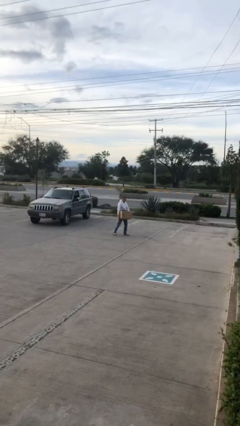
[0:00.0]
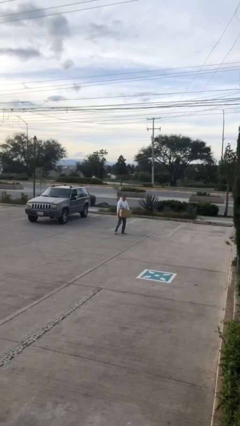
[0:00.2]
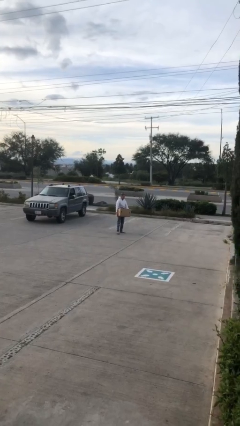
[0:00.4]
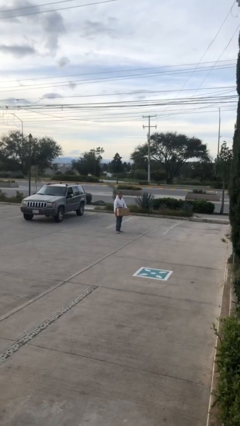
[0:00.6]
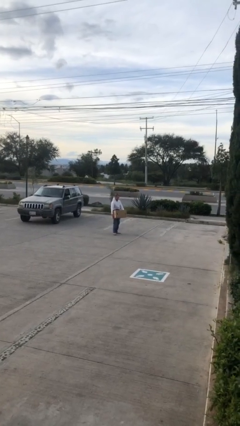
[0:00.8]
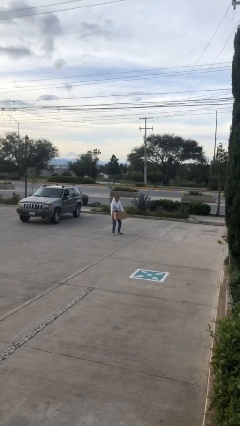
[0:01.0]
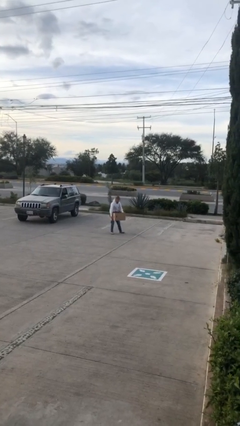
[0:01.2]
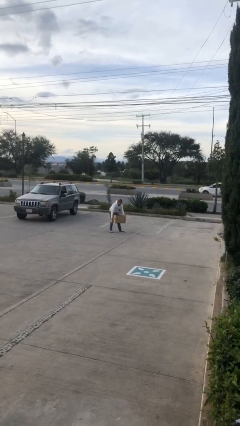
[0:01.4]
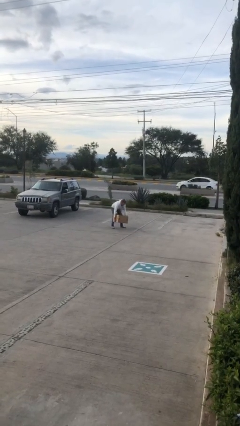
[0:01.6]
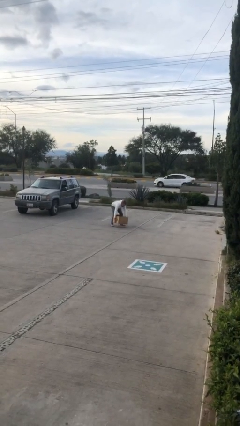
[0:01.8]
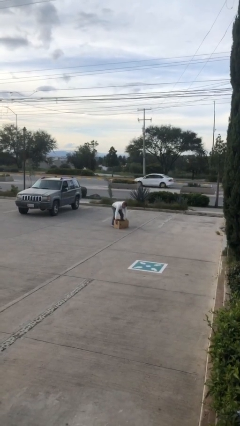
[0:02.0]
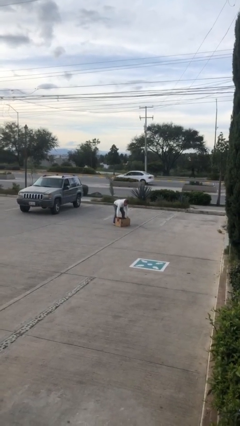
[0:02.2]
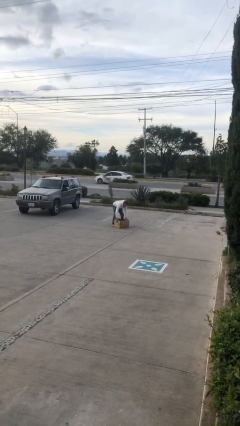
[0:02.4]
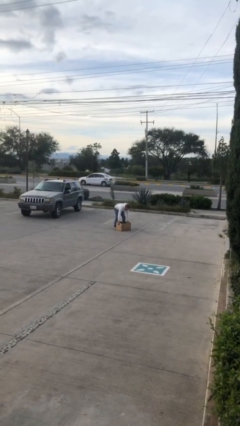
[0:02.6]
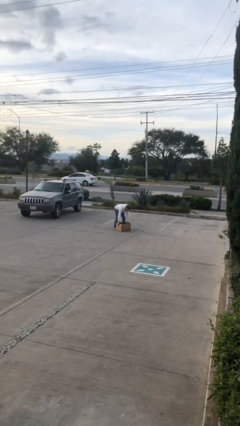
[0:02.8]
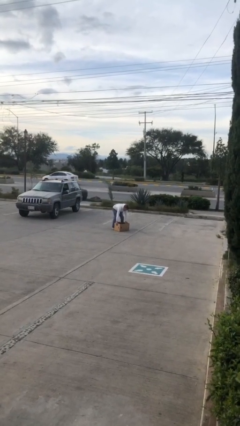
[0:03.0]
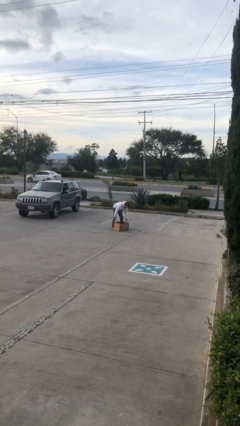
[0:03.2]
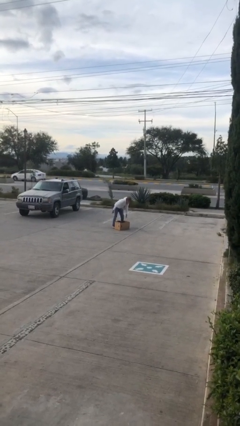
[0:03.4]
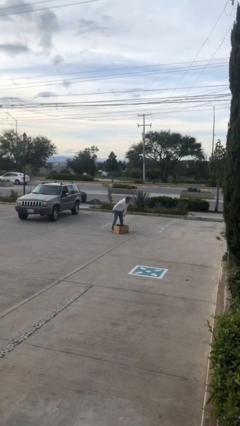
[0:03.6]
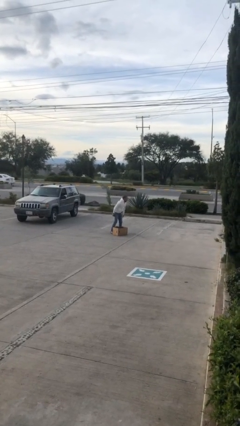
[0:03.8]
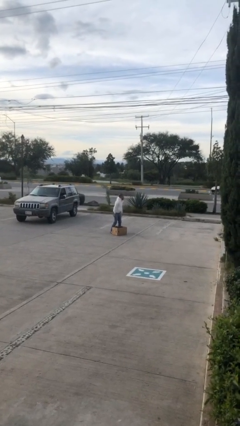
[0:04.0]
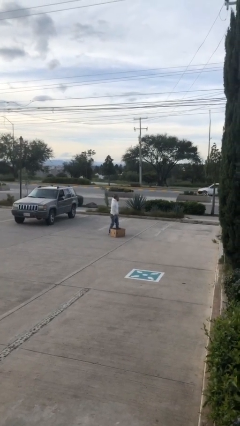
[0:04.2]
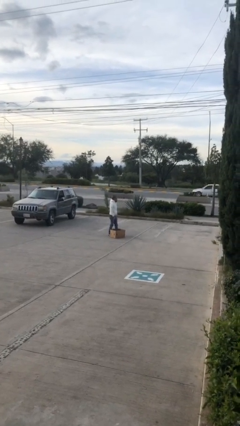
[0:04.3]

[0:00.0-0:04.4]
person puts down object on floor

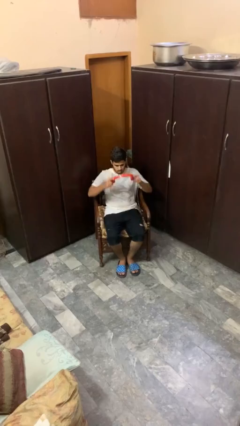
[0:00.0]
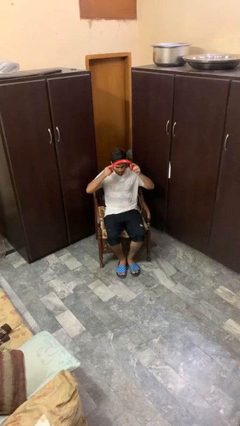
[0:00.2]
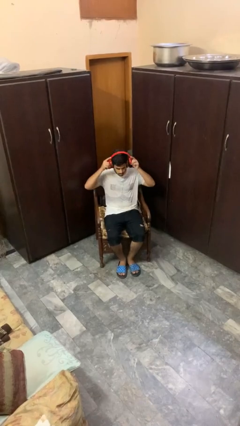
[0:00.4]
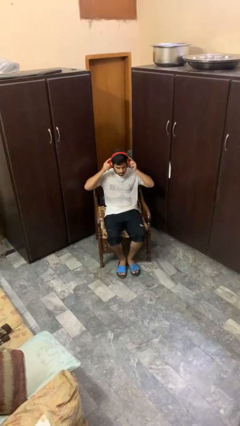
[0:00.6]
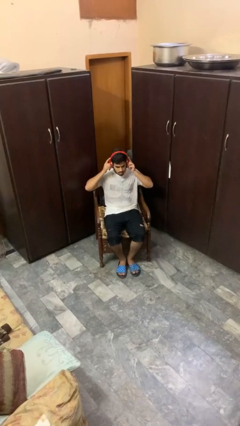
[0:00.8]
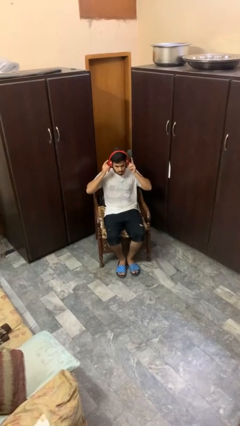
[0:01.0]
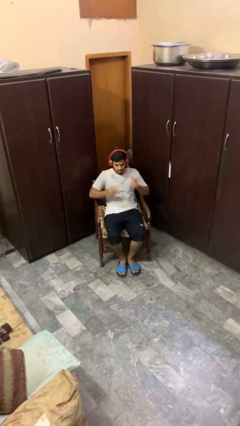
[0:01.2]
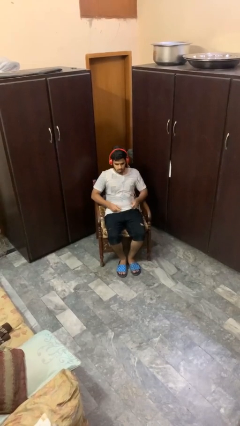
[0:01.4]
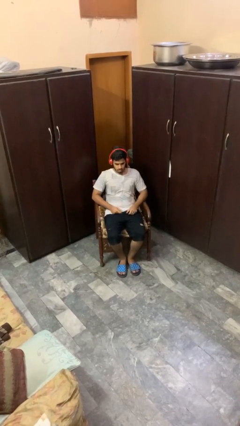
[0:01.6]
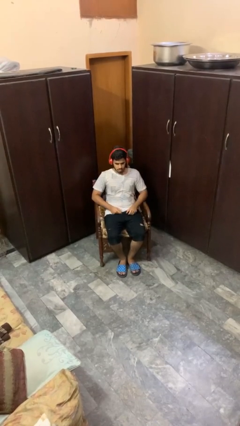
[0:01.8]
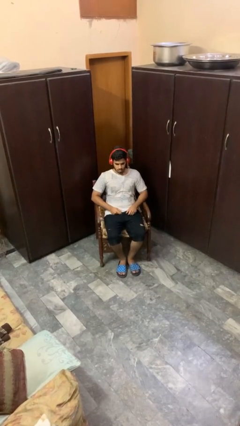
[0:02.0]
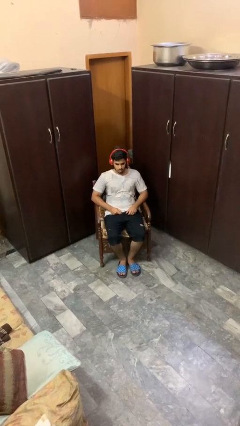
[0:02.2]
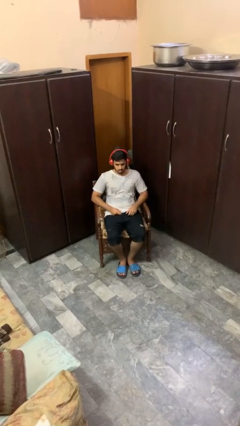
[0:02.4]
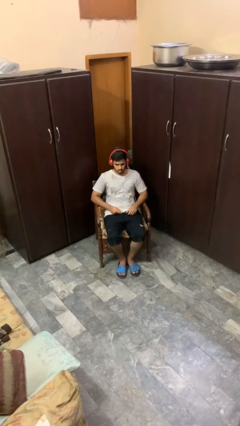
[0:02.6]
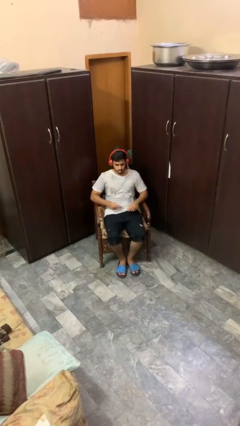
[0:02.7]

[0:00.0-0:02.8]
person puts on headphones

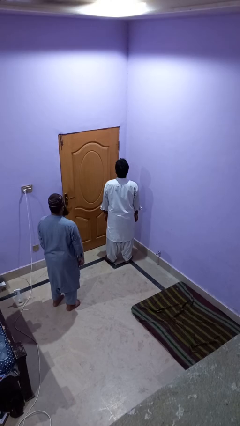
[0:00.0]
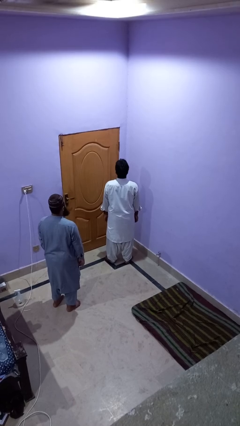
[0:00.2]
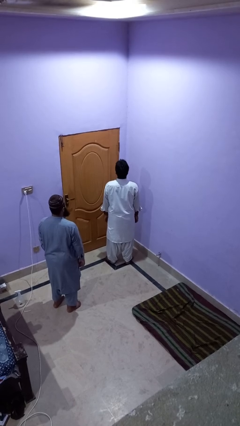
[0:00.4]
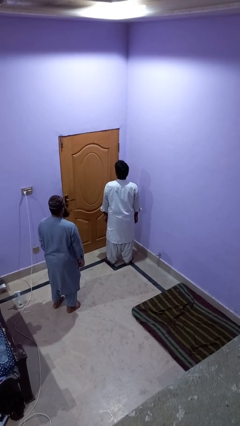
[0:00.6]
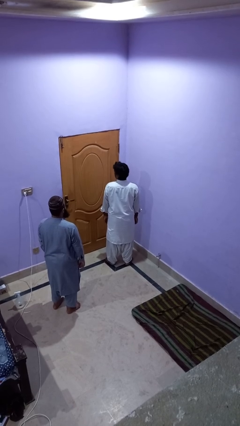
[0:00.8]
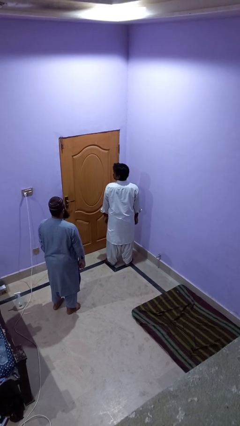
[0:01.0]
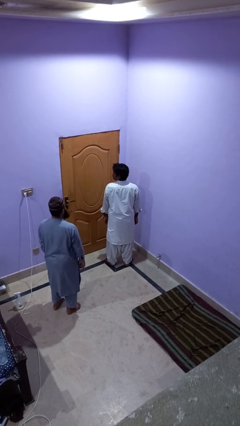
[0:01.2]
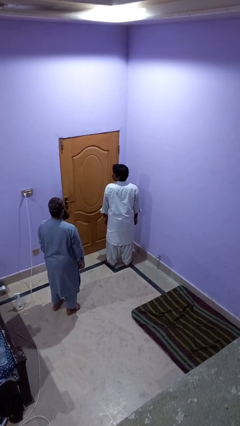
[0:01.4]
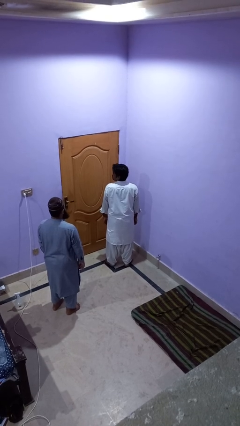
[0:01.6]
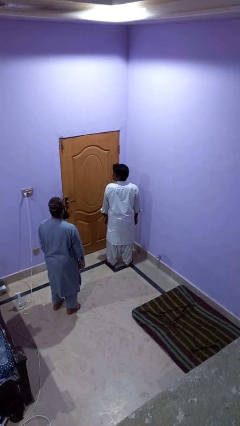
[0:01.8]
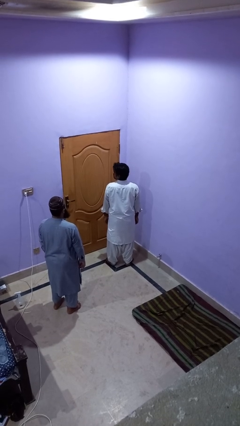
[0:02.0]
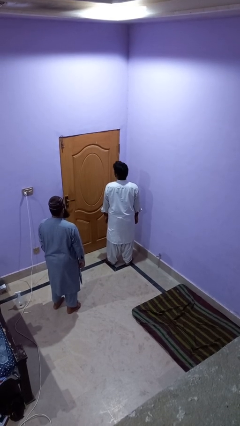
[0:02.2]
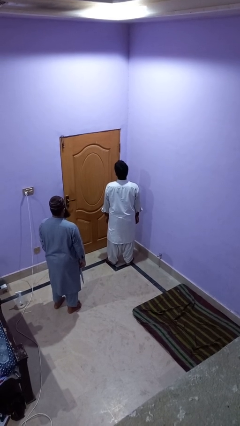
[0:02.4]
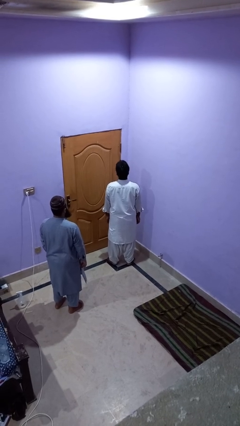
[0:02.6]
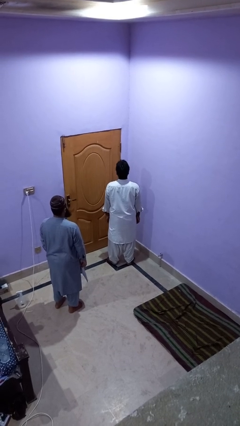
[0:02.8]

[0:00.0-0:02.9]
person looks over shoulder

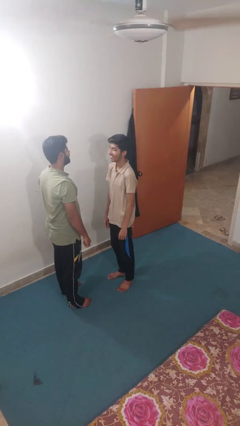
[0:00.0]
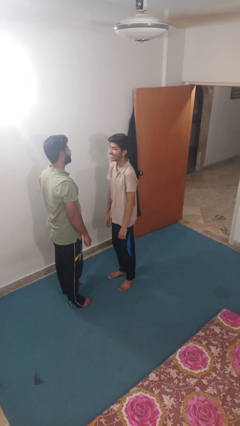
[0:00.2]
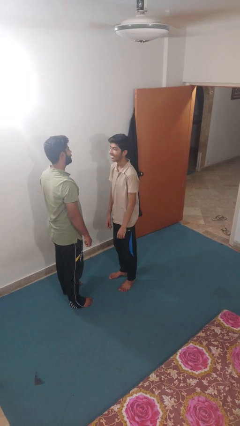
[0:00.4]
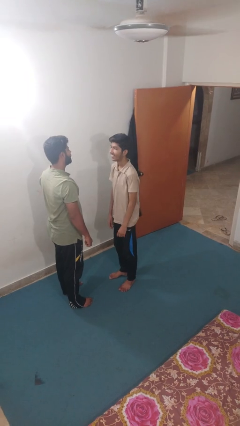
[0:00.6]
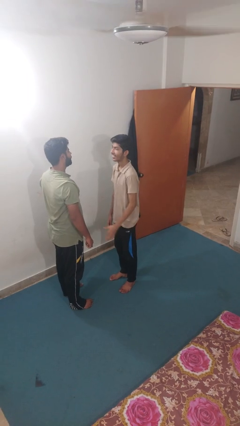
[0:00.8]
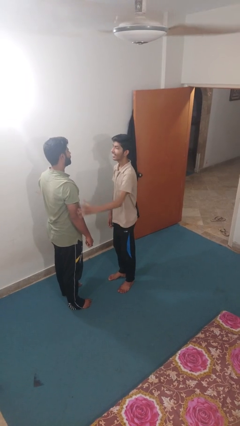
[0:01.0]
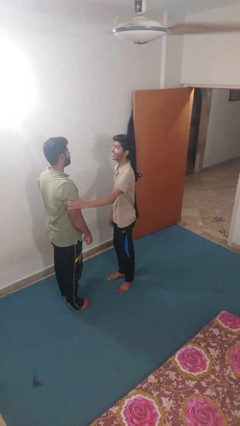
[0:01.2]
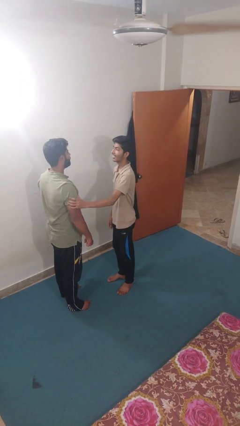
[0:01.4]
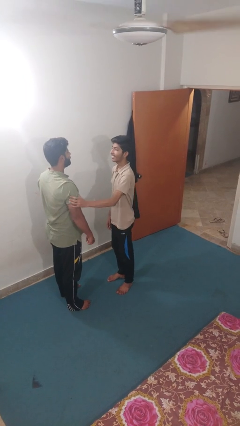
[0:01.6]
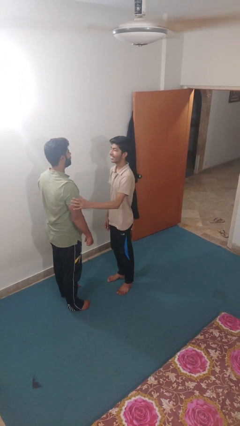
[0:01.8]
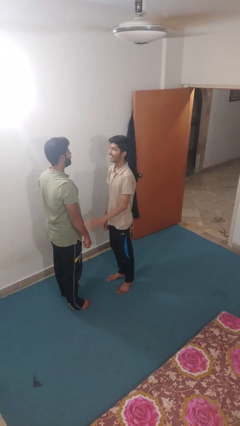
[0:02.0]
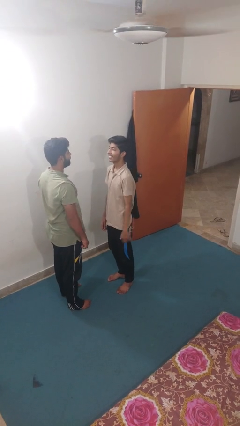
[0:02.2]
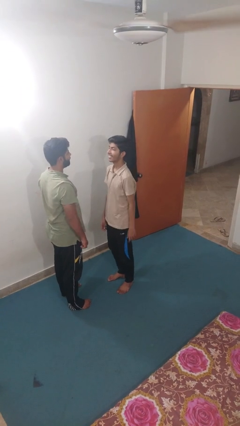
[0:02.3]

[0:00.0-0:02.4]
person grabs person by bicep

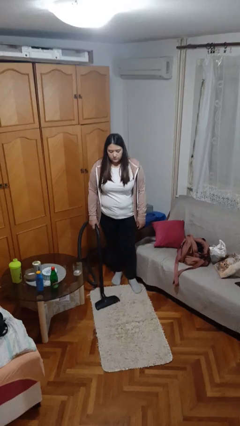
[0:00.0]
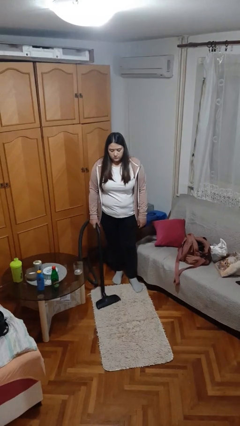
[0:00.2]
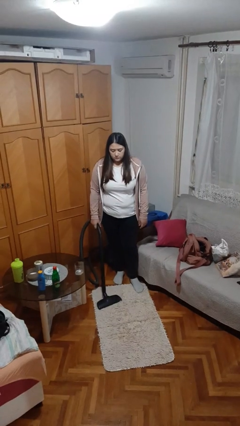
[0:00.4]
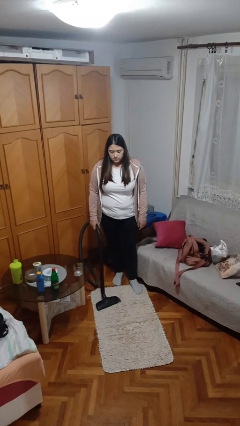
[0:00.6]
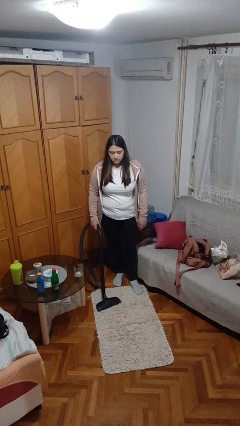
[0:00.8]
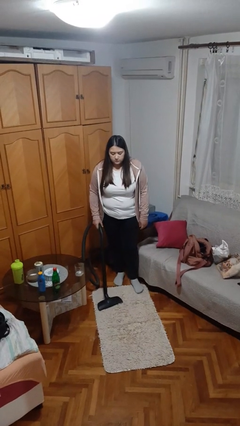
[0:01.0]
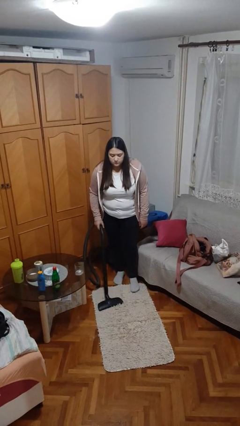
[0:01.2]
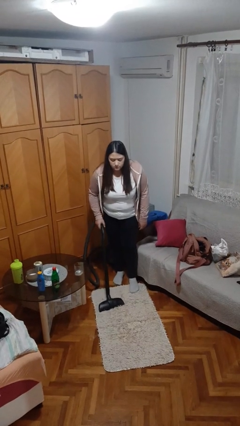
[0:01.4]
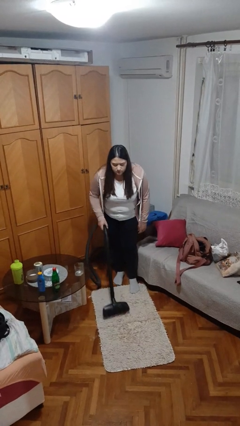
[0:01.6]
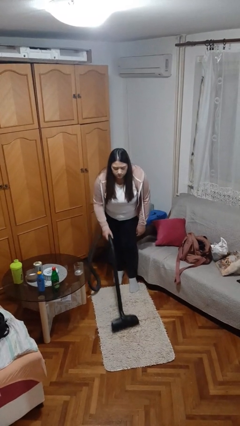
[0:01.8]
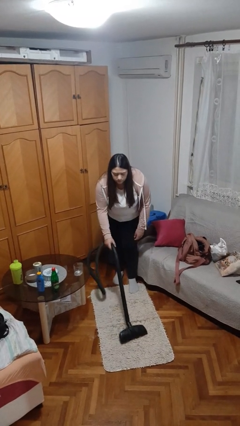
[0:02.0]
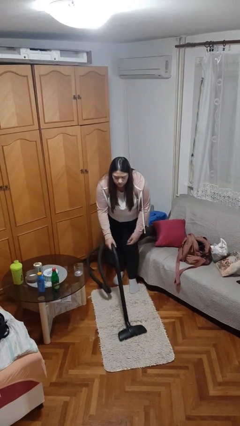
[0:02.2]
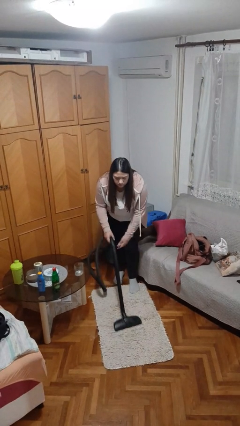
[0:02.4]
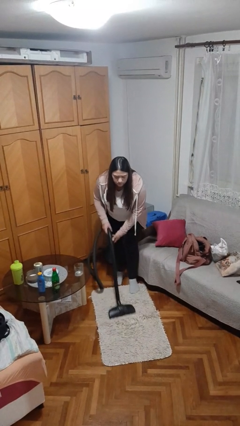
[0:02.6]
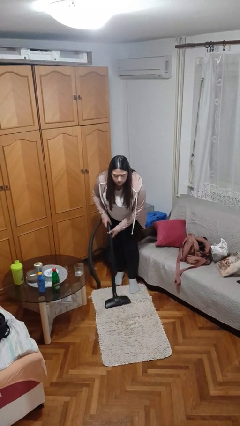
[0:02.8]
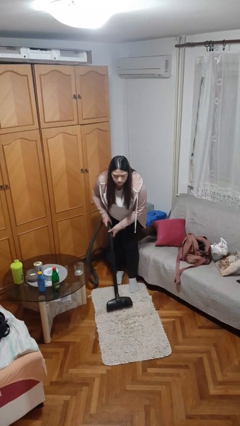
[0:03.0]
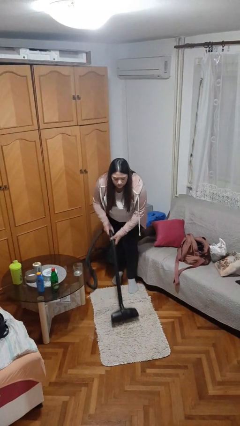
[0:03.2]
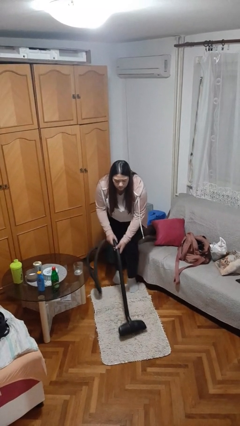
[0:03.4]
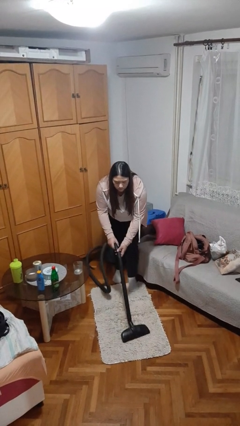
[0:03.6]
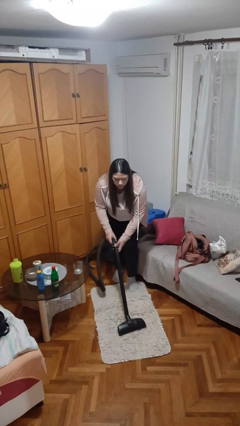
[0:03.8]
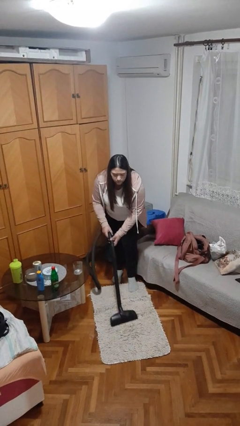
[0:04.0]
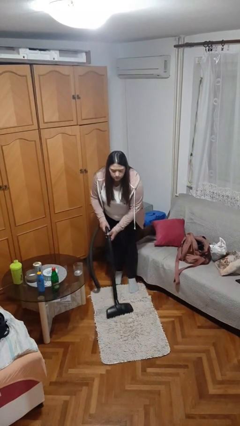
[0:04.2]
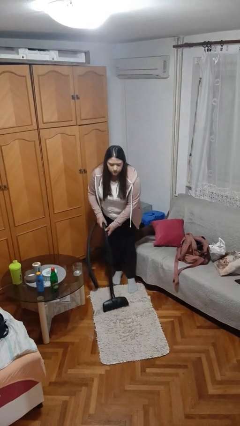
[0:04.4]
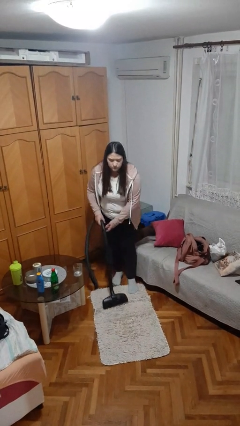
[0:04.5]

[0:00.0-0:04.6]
person vacuums carpet

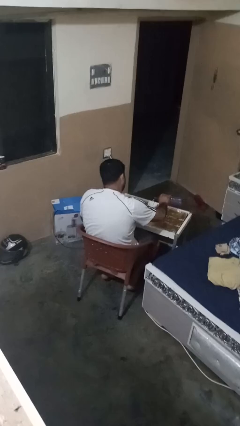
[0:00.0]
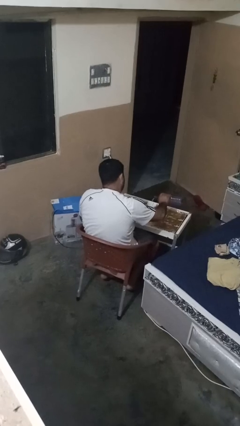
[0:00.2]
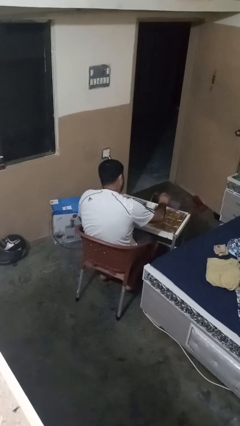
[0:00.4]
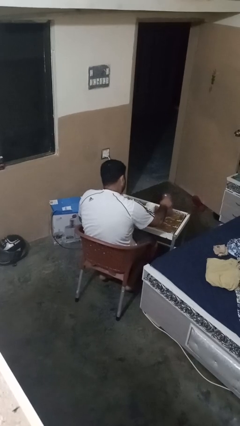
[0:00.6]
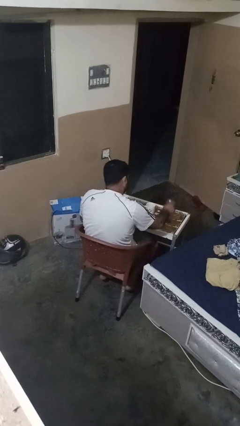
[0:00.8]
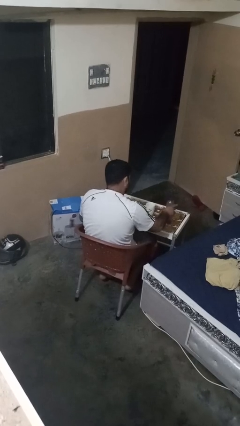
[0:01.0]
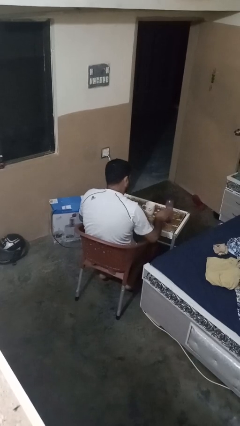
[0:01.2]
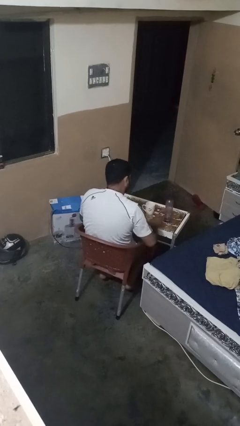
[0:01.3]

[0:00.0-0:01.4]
person pours liquid into cup
